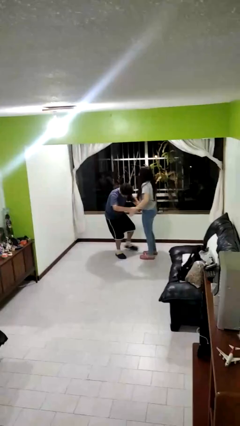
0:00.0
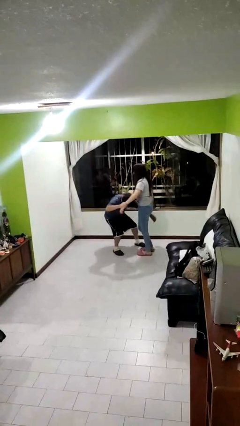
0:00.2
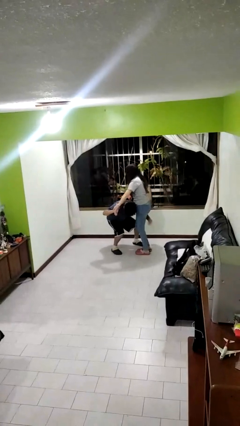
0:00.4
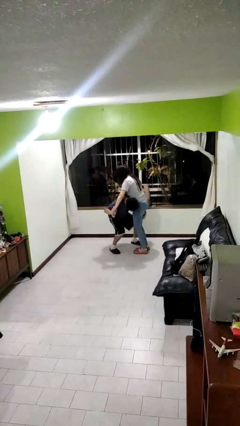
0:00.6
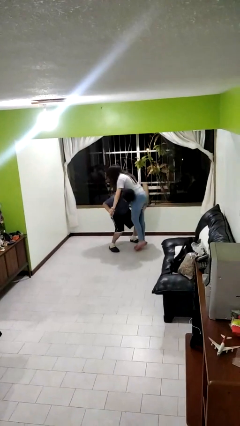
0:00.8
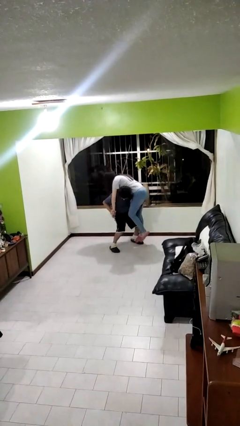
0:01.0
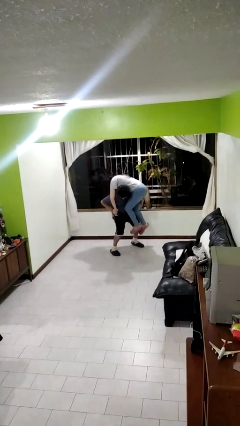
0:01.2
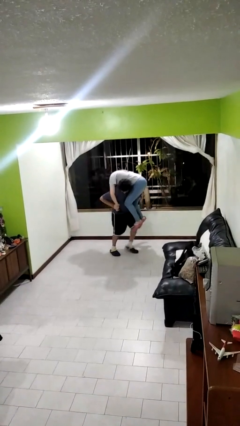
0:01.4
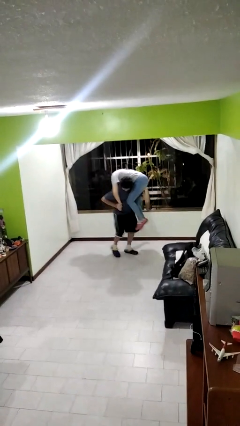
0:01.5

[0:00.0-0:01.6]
person carries person over shoulder

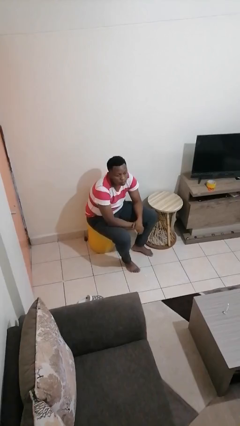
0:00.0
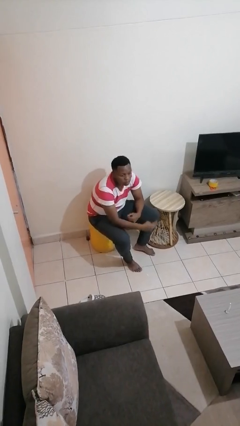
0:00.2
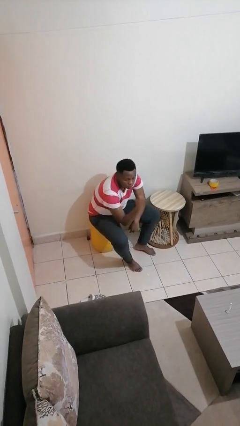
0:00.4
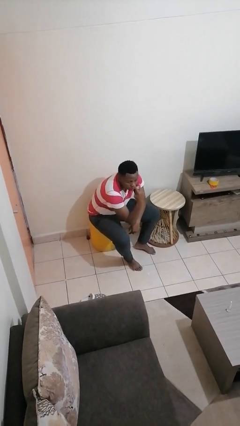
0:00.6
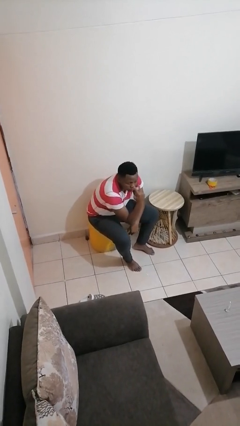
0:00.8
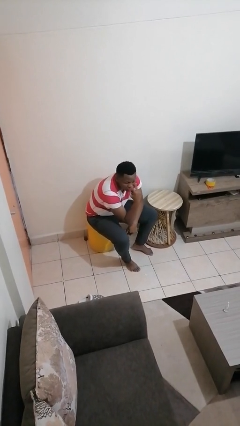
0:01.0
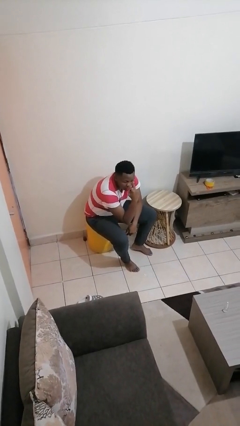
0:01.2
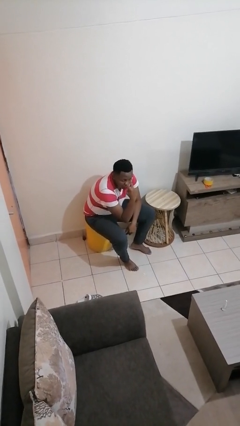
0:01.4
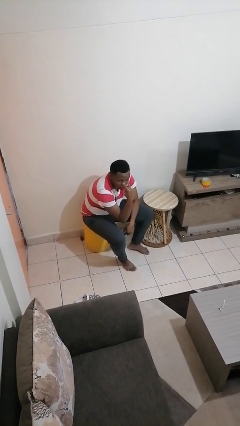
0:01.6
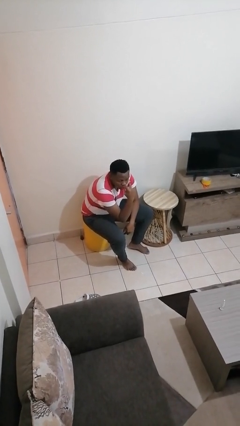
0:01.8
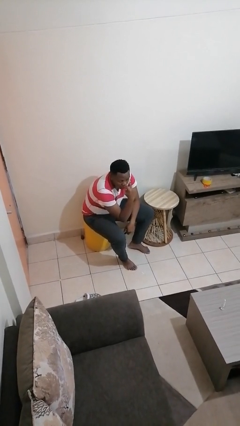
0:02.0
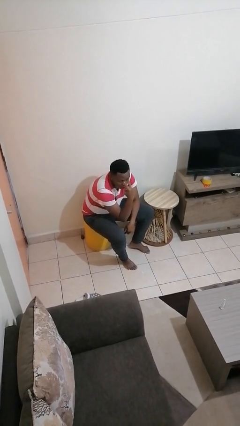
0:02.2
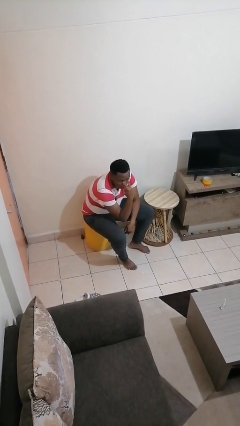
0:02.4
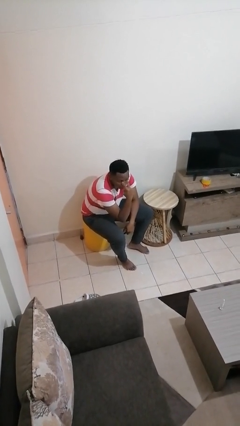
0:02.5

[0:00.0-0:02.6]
person gestures watch closely

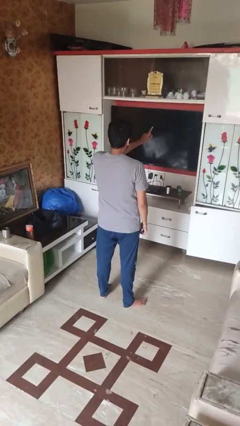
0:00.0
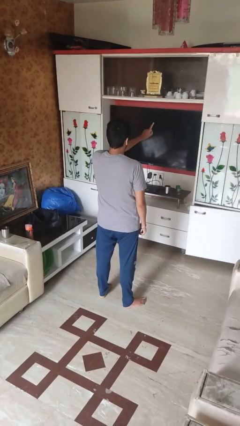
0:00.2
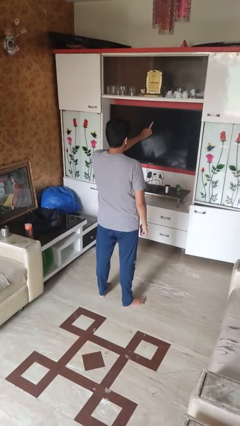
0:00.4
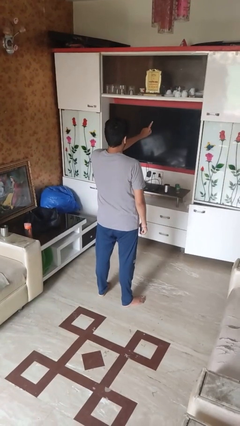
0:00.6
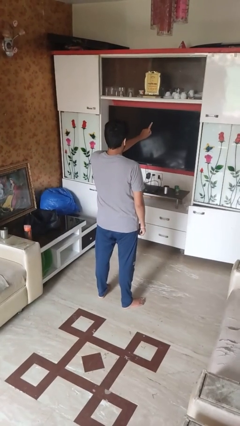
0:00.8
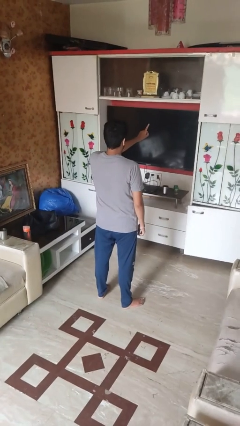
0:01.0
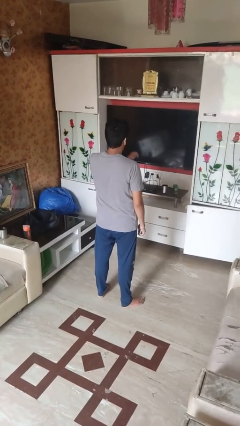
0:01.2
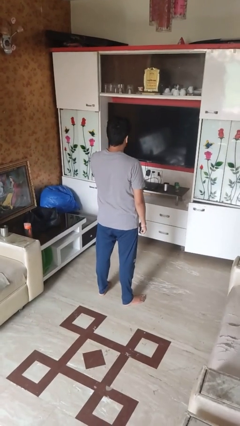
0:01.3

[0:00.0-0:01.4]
person gestures number one

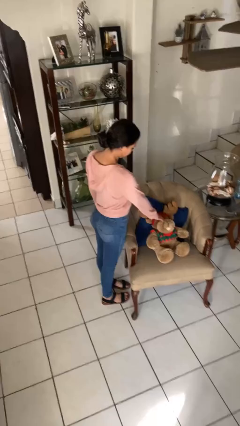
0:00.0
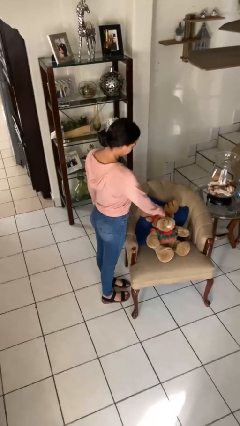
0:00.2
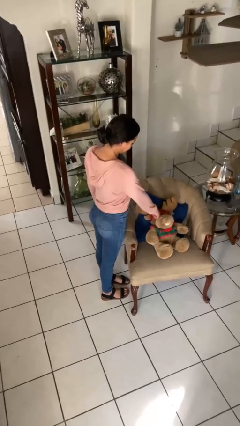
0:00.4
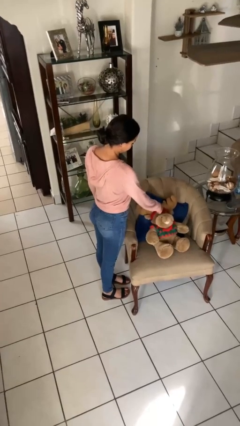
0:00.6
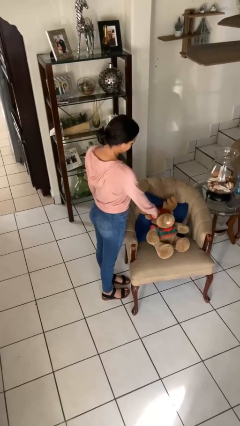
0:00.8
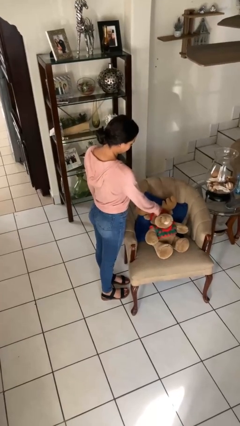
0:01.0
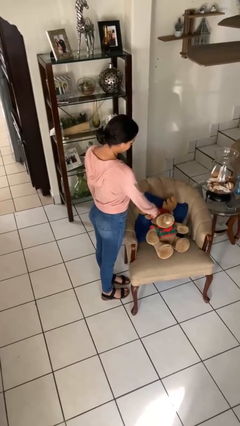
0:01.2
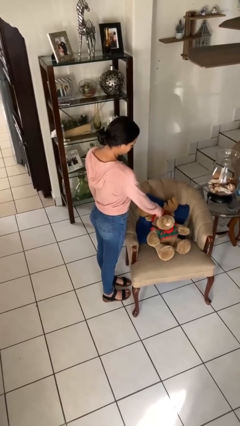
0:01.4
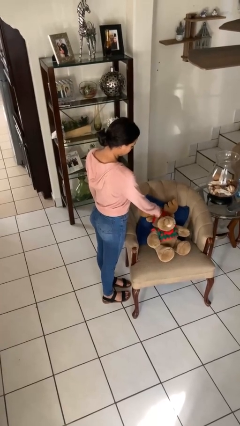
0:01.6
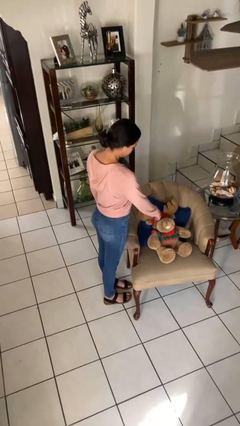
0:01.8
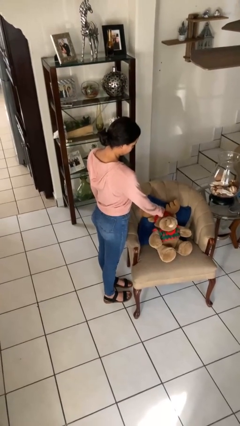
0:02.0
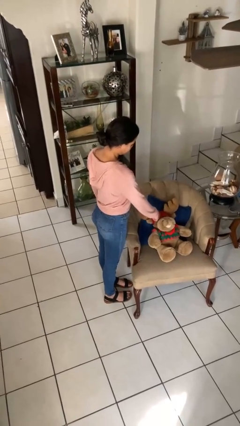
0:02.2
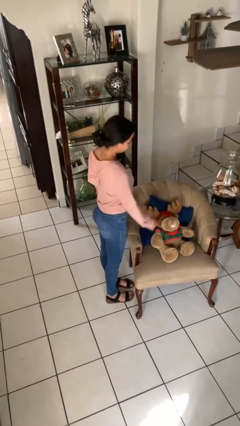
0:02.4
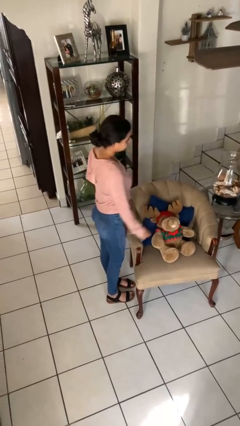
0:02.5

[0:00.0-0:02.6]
person taps object with finger

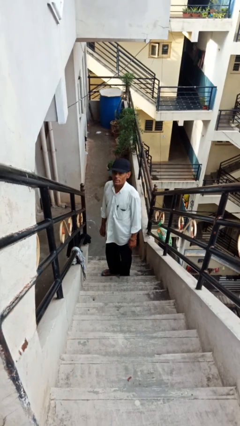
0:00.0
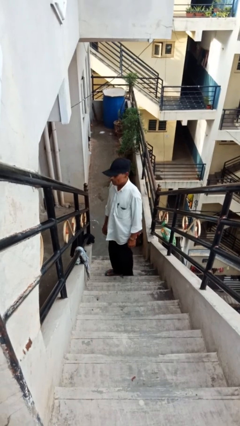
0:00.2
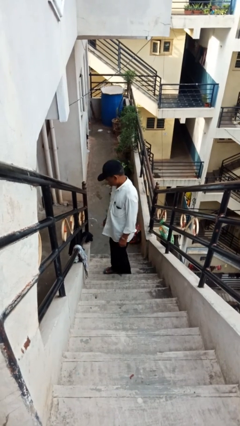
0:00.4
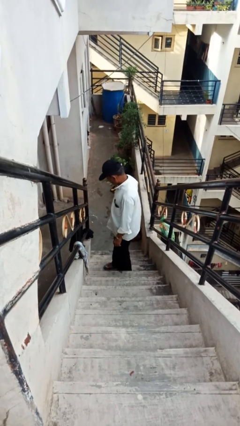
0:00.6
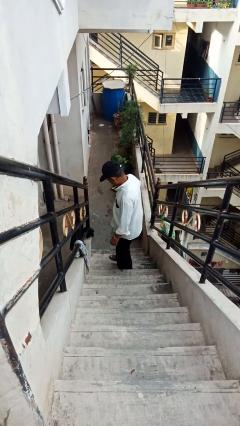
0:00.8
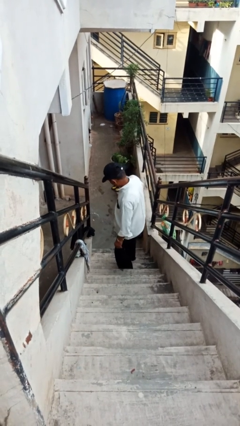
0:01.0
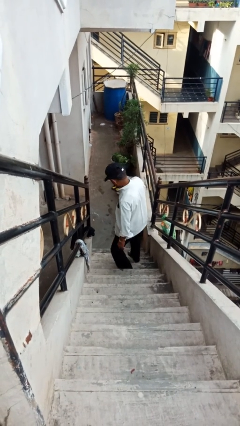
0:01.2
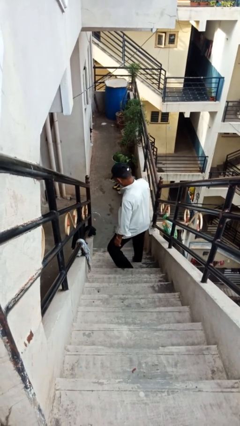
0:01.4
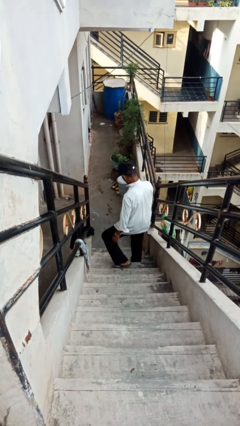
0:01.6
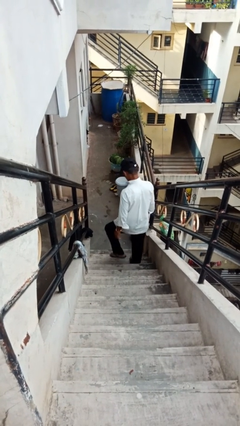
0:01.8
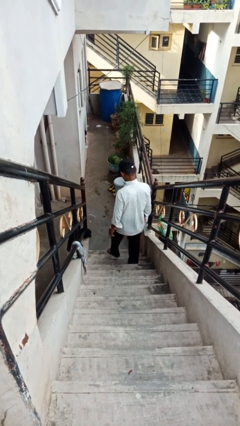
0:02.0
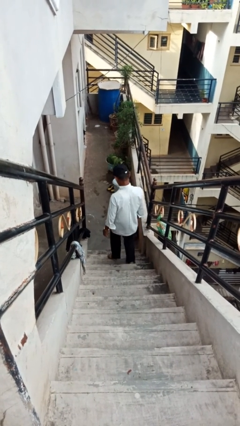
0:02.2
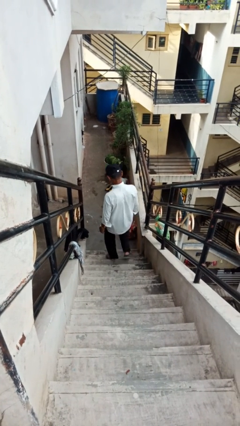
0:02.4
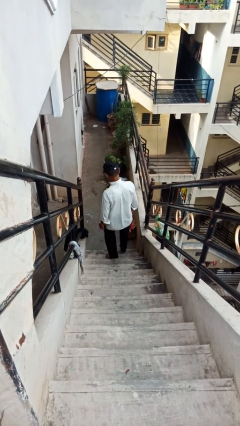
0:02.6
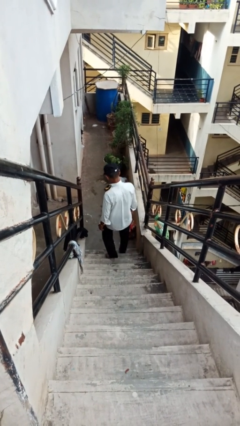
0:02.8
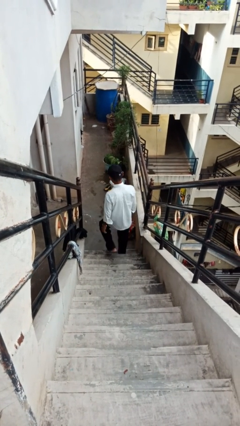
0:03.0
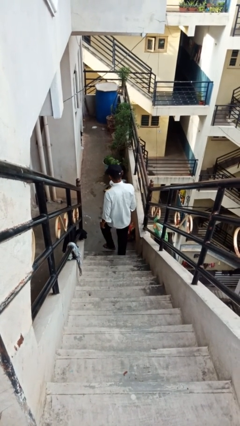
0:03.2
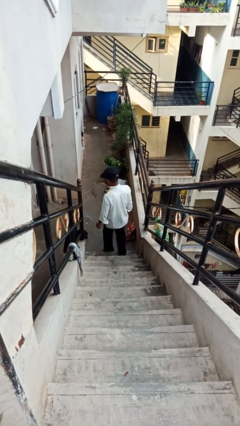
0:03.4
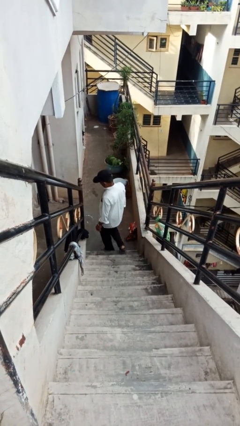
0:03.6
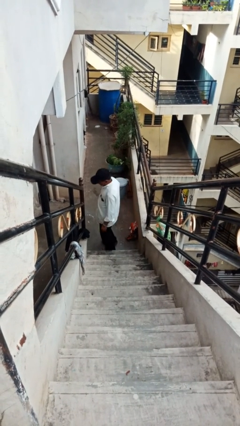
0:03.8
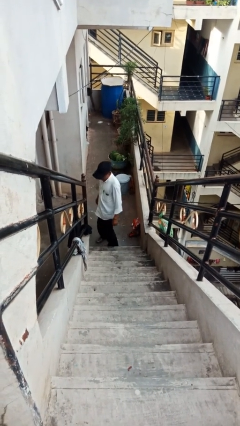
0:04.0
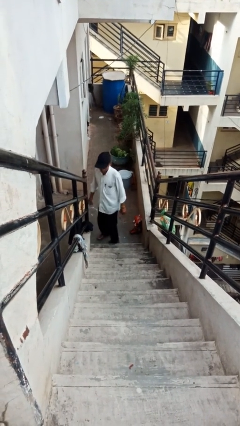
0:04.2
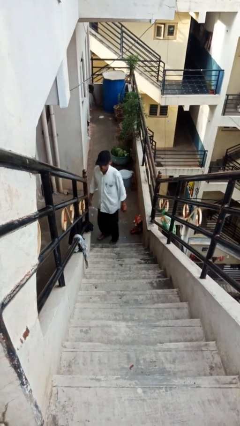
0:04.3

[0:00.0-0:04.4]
person climbs down stairs

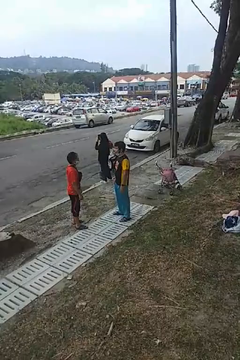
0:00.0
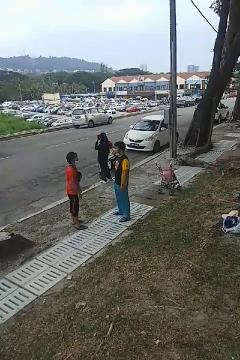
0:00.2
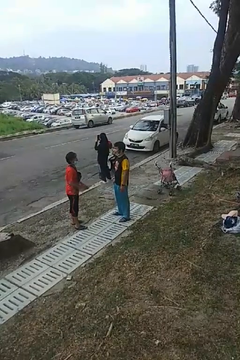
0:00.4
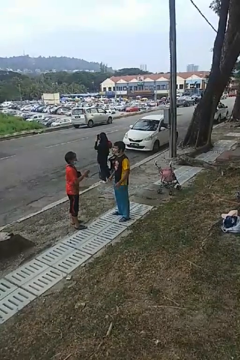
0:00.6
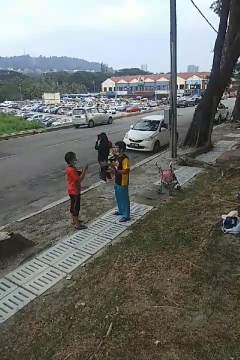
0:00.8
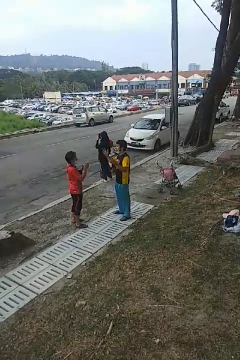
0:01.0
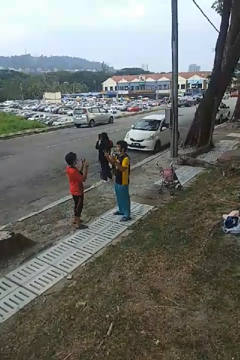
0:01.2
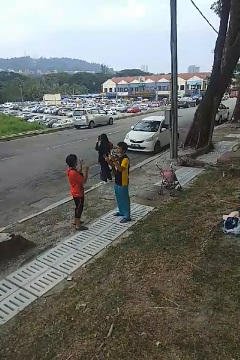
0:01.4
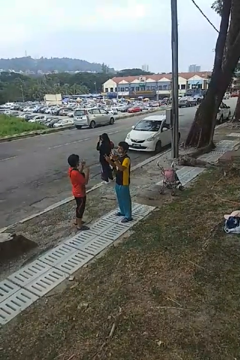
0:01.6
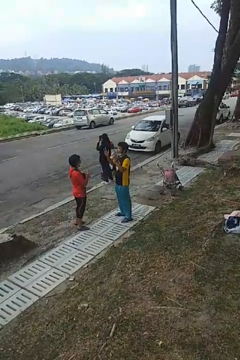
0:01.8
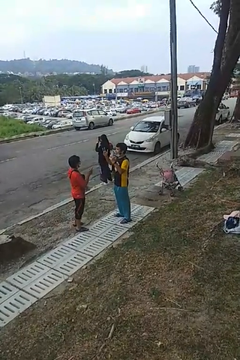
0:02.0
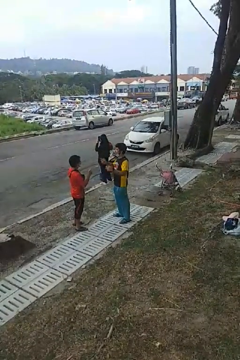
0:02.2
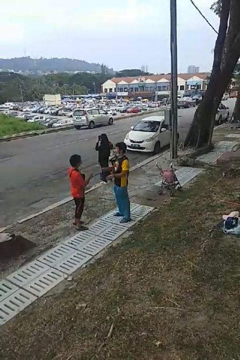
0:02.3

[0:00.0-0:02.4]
person talks to person

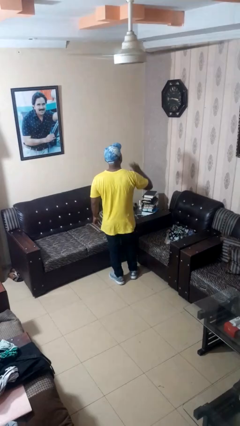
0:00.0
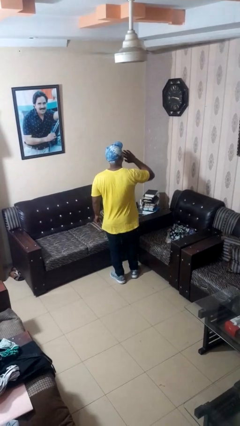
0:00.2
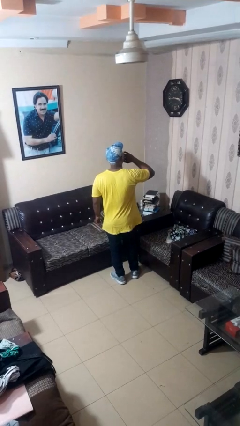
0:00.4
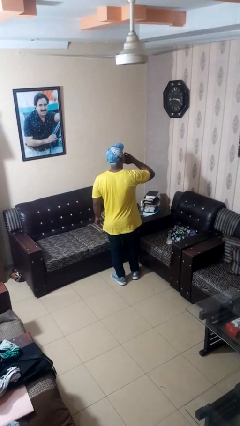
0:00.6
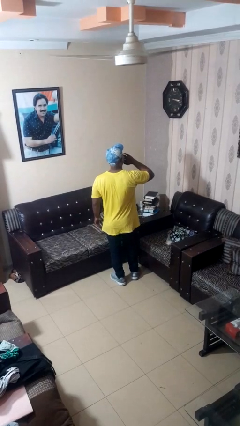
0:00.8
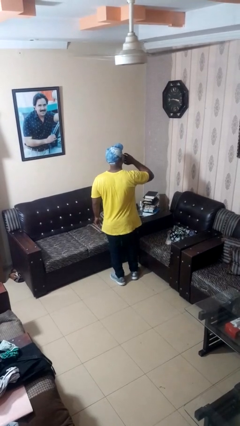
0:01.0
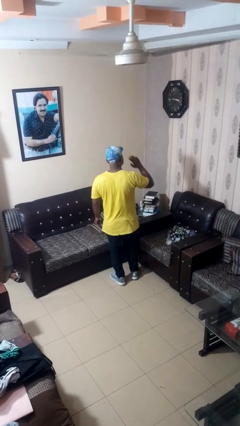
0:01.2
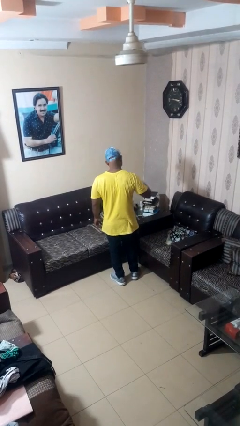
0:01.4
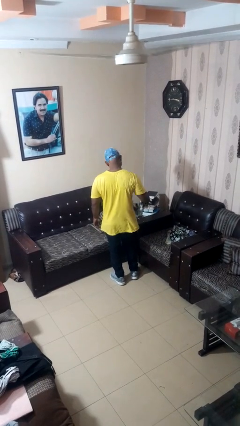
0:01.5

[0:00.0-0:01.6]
person yawns

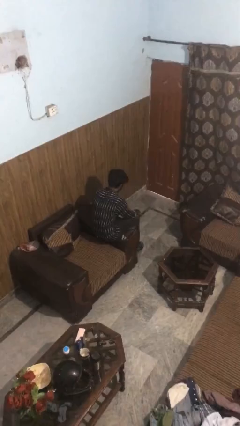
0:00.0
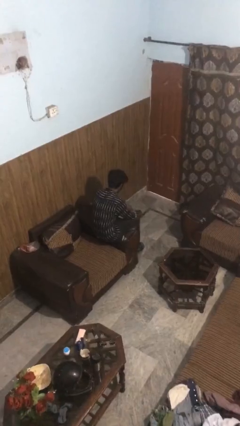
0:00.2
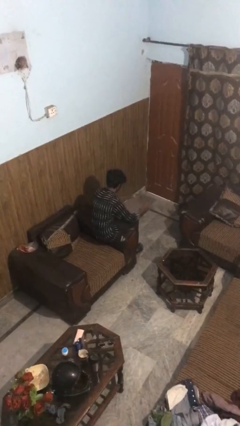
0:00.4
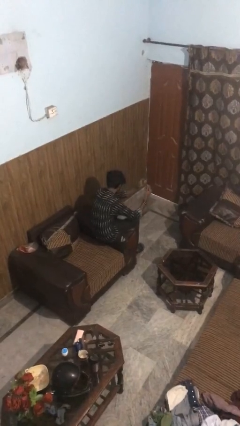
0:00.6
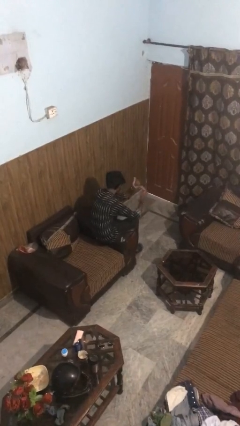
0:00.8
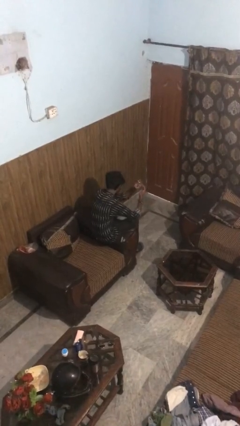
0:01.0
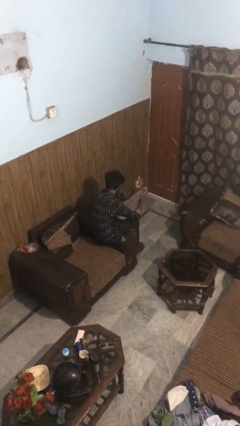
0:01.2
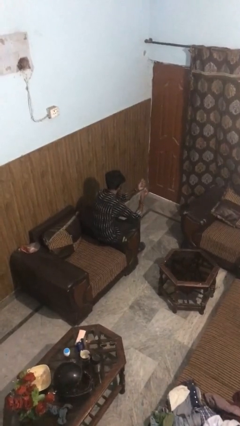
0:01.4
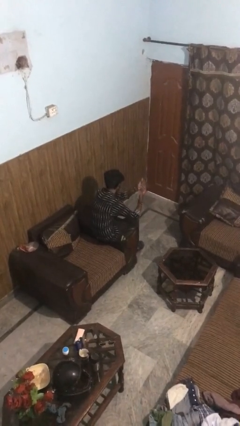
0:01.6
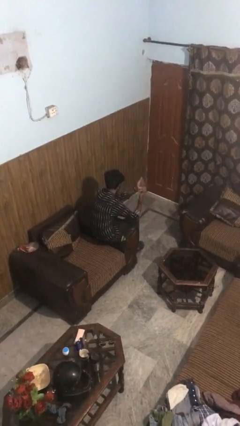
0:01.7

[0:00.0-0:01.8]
person snaps fingers
